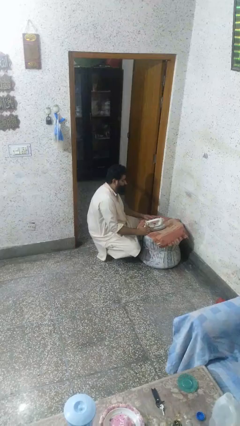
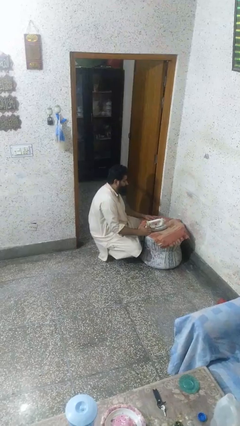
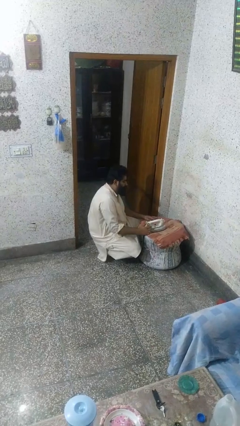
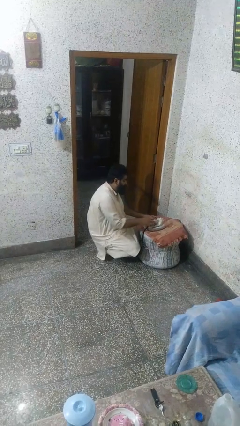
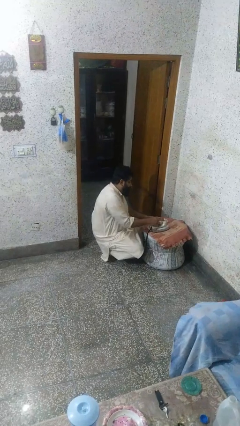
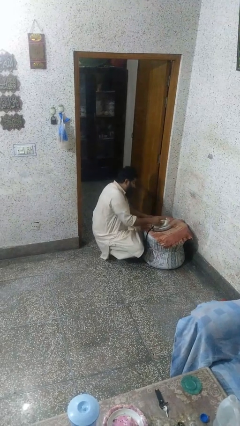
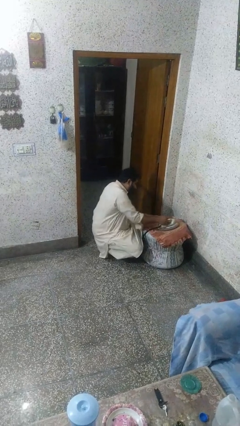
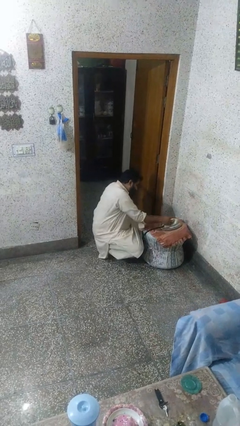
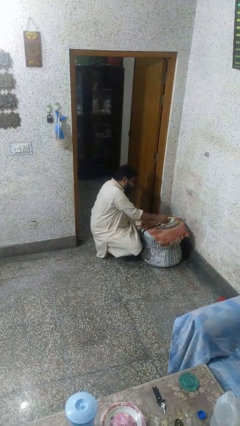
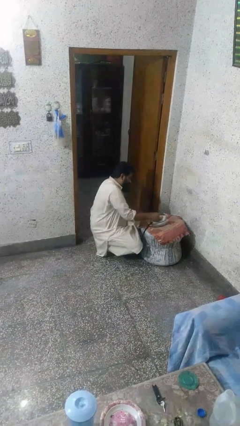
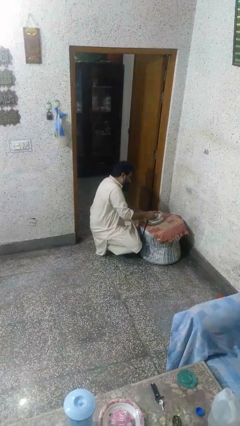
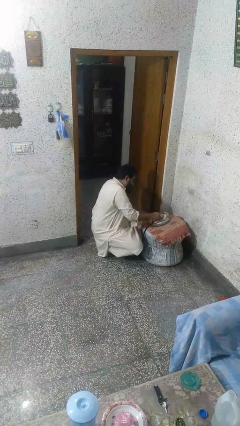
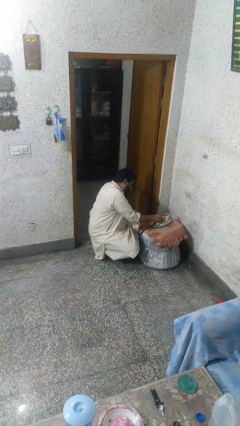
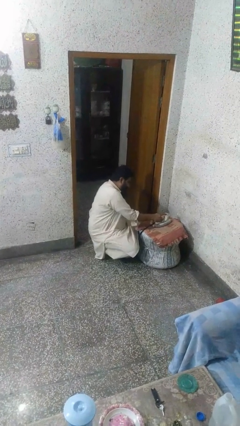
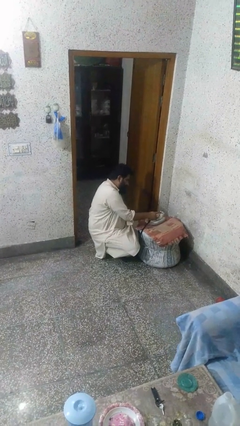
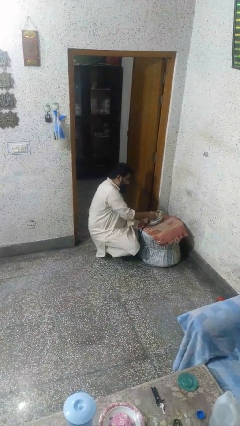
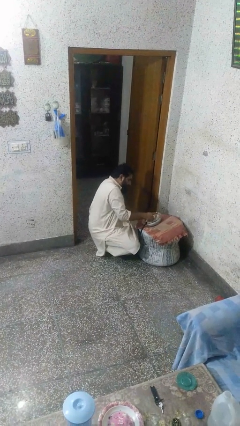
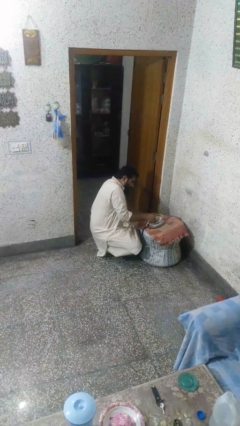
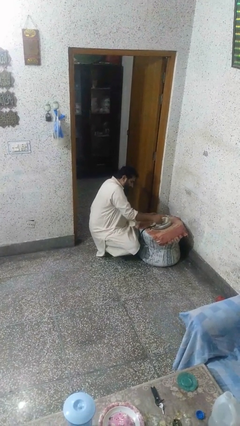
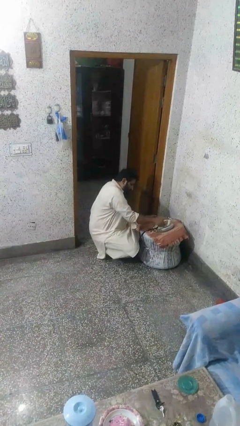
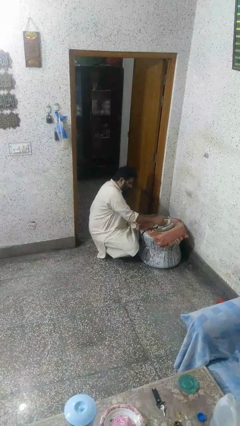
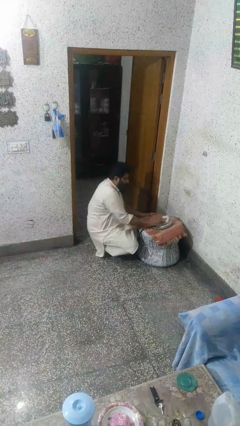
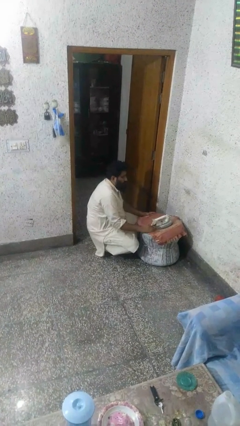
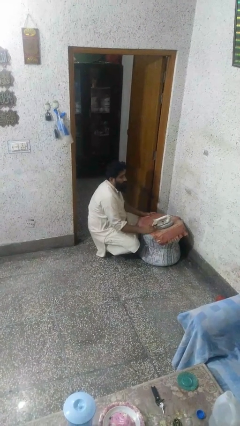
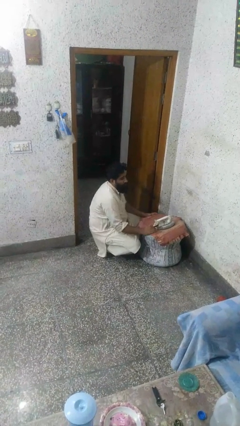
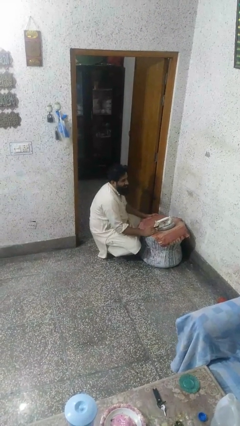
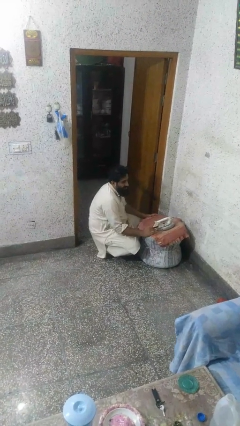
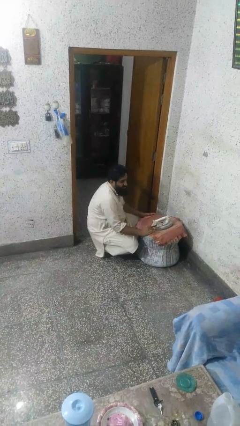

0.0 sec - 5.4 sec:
person irons clothes

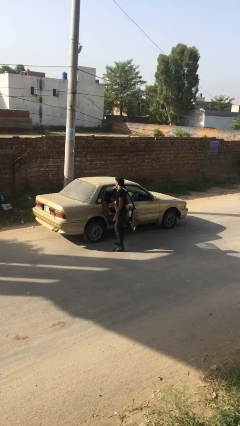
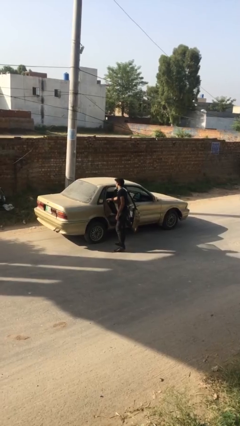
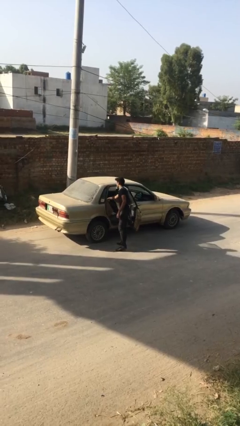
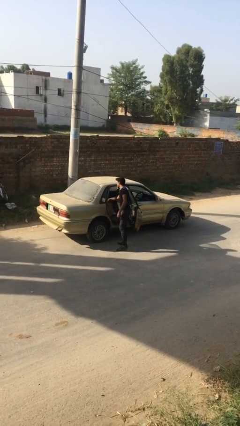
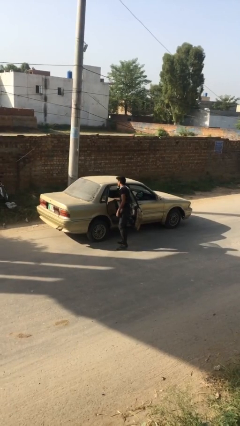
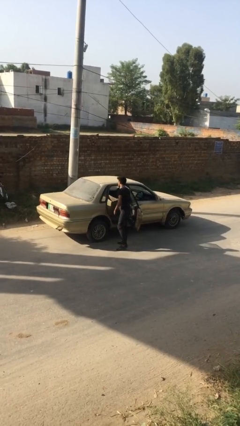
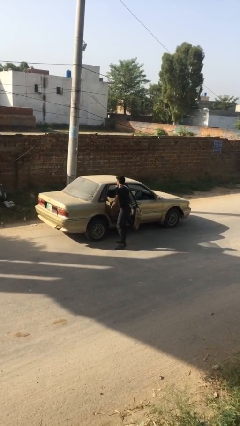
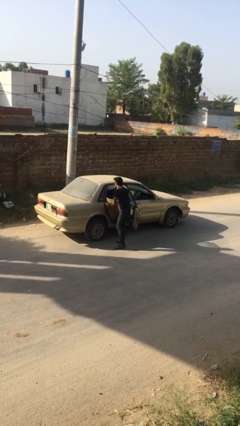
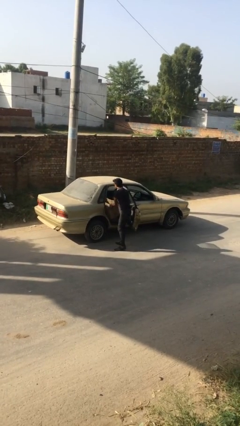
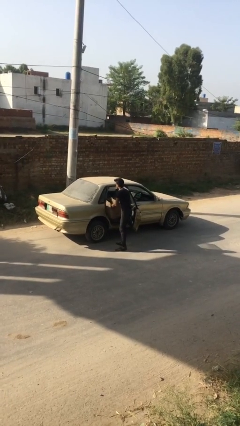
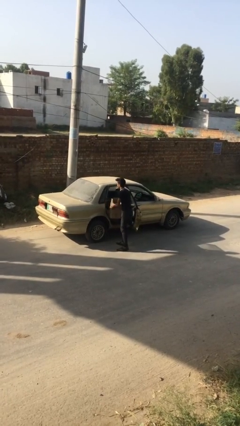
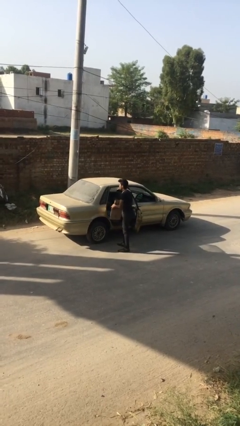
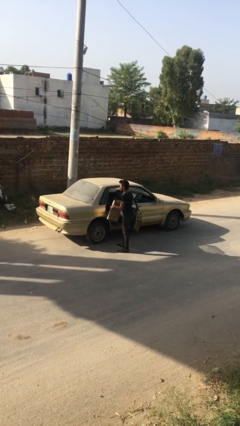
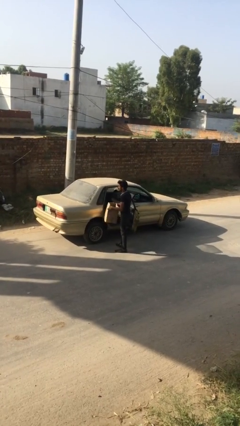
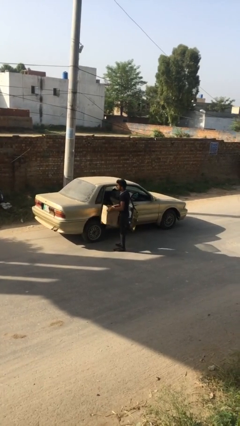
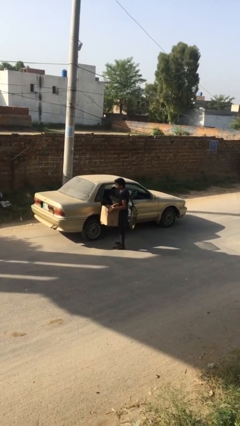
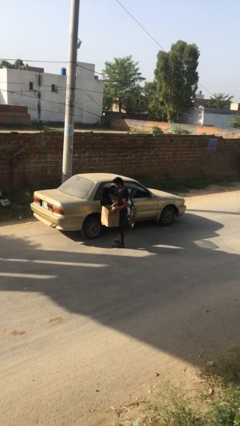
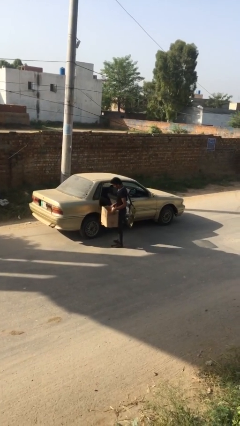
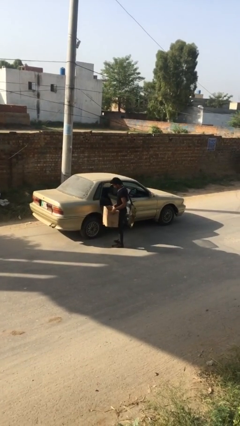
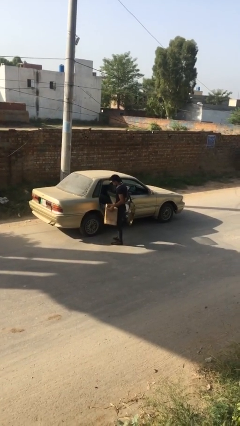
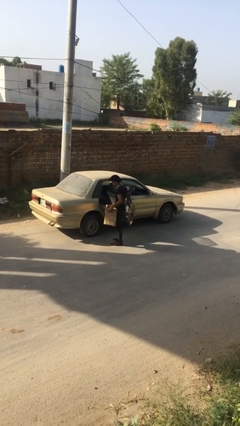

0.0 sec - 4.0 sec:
person unloads car

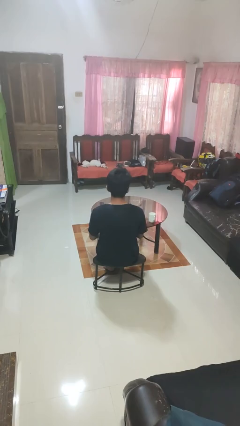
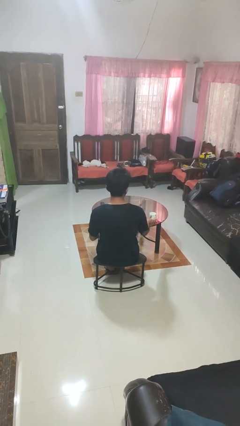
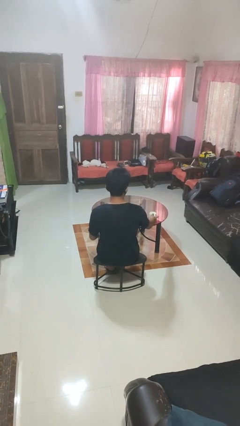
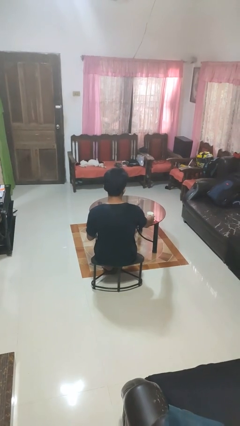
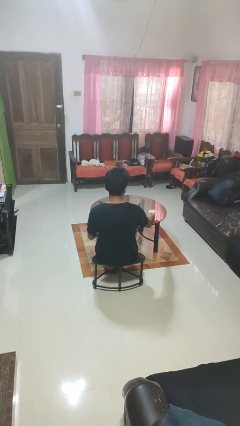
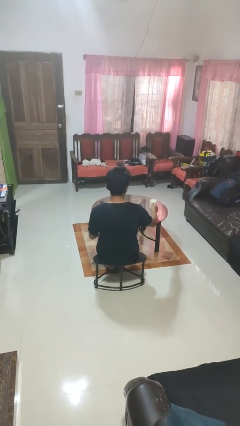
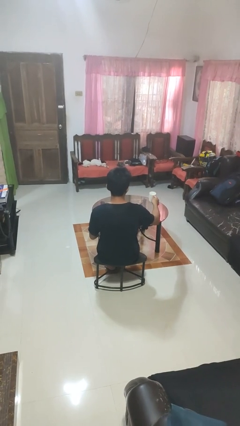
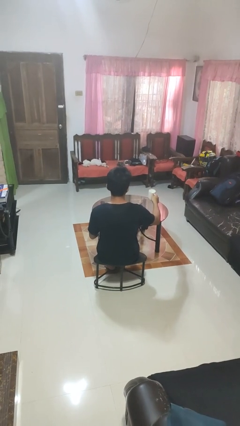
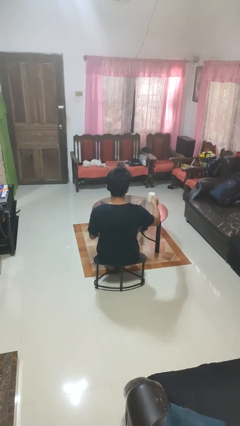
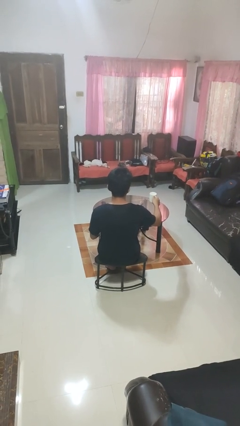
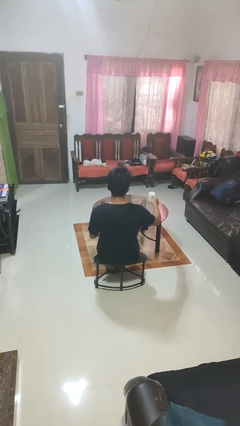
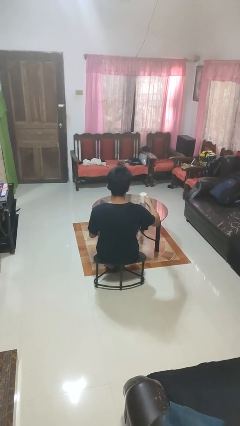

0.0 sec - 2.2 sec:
person picks up object from table

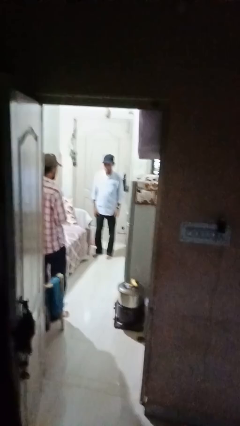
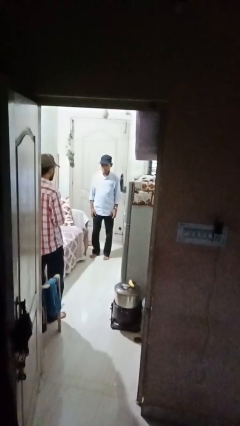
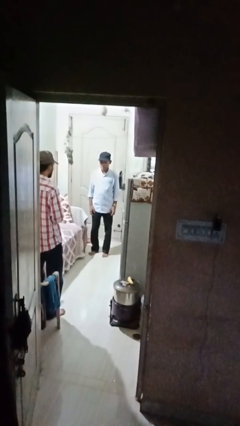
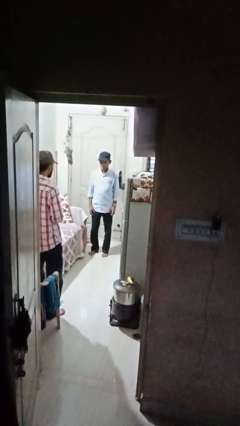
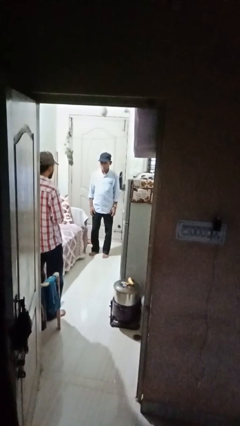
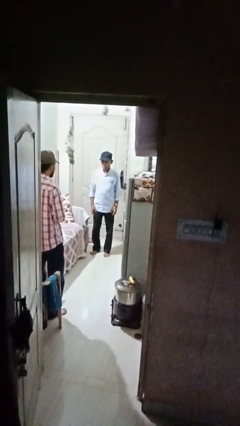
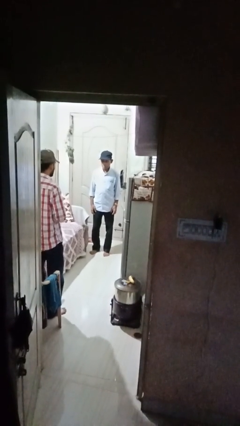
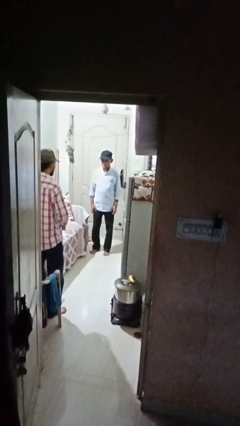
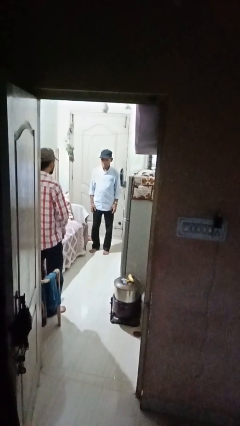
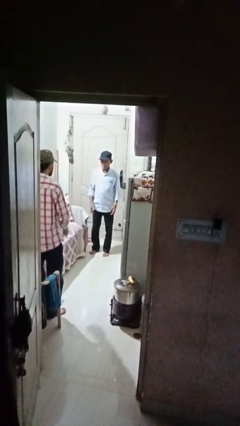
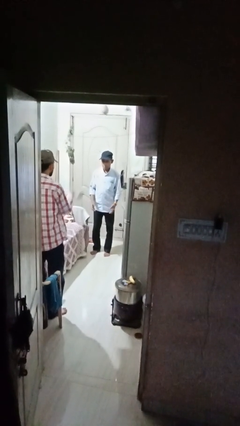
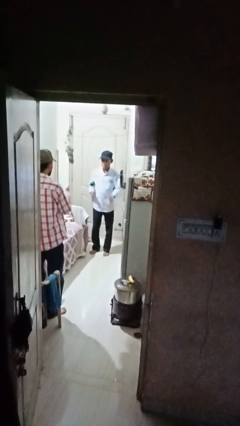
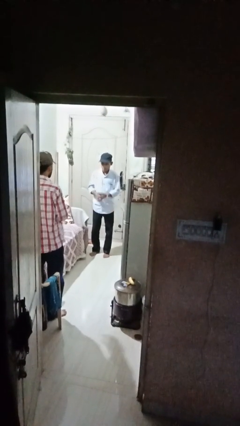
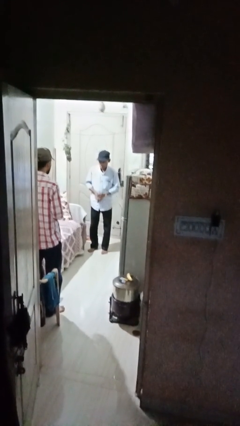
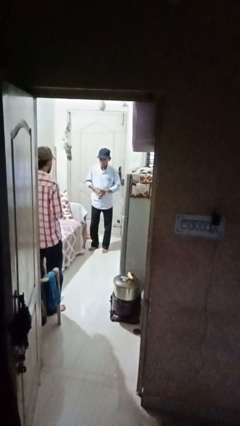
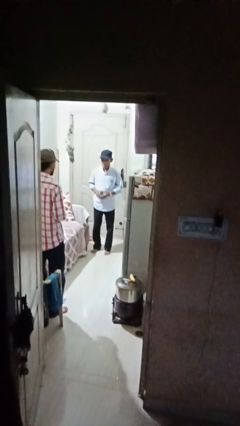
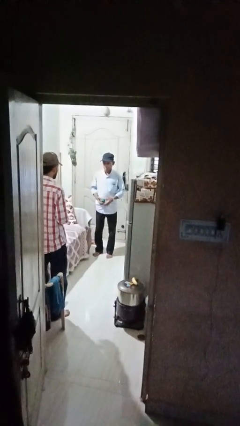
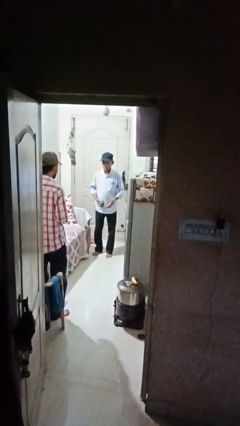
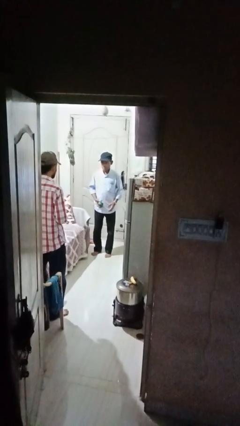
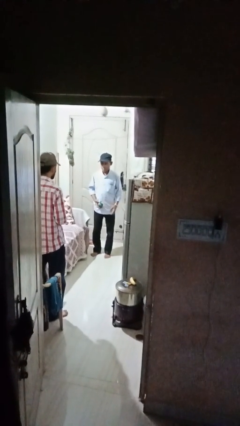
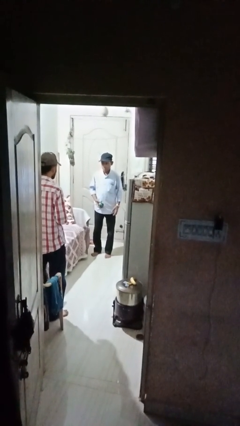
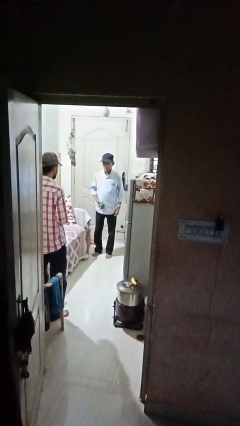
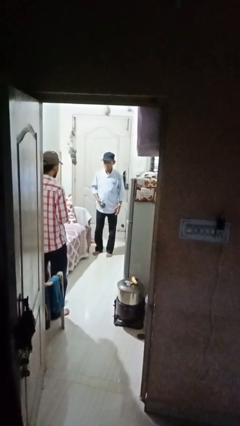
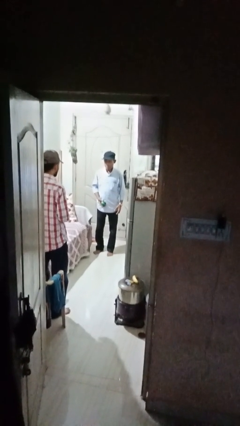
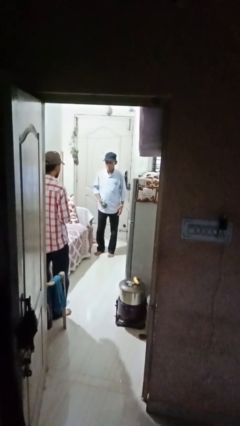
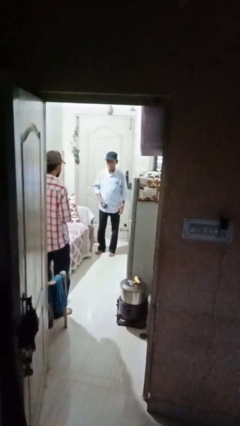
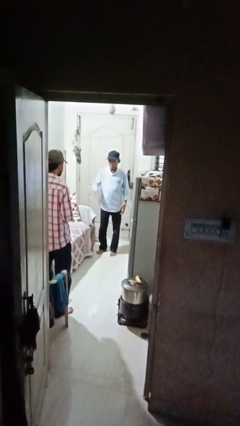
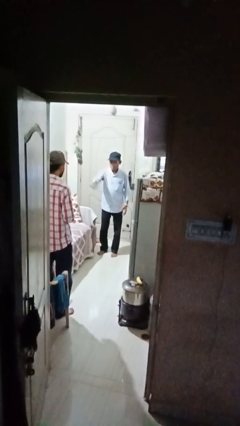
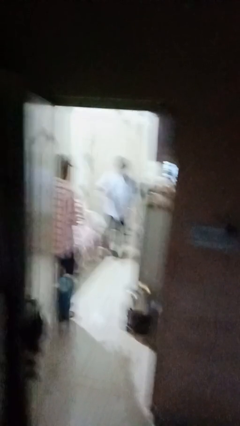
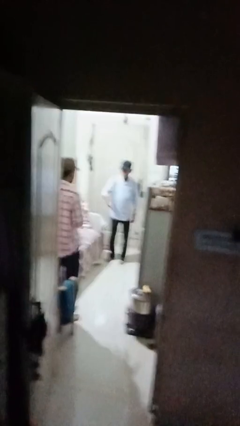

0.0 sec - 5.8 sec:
person catches object from person
